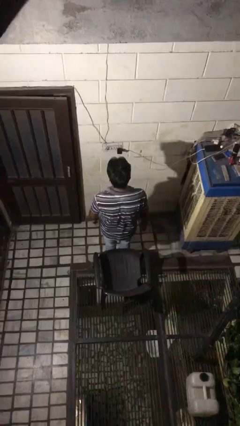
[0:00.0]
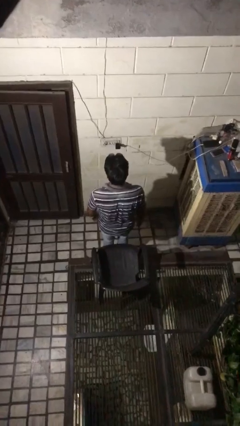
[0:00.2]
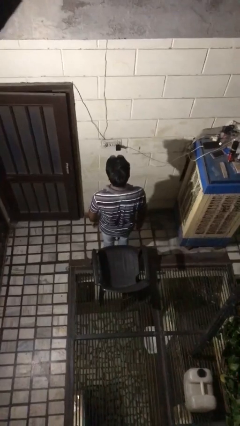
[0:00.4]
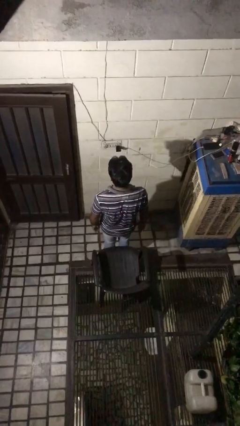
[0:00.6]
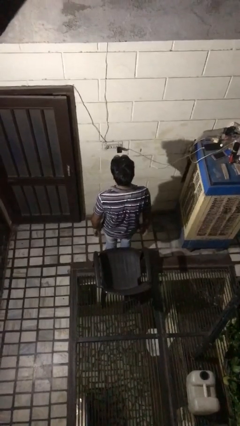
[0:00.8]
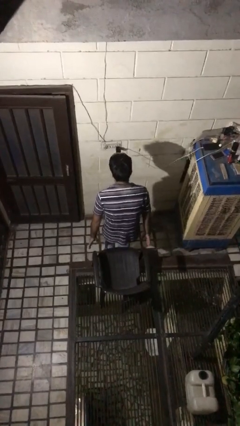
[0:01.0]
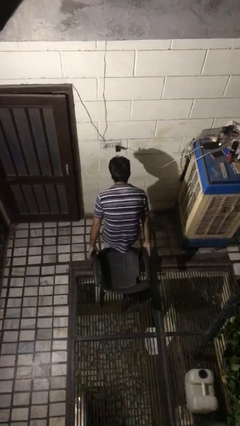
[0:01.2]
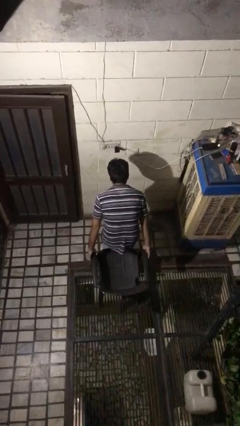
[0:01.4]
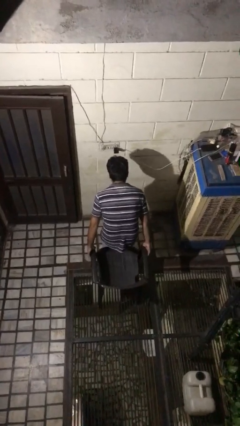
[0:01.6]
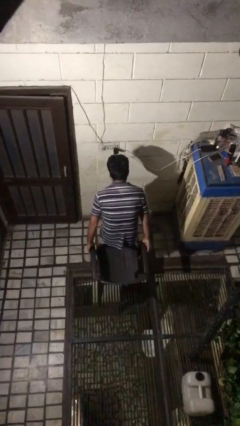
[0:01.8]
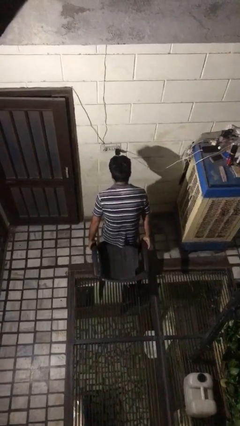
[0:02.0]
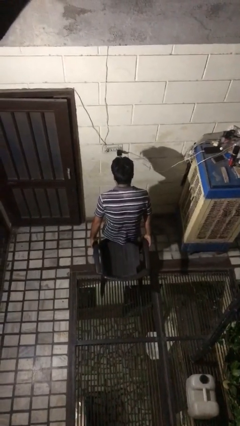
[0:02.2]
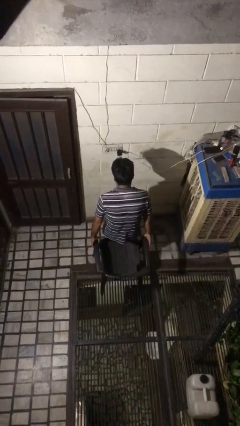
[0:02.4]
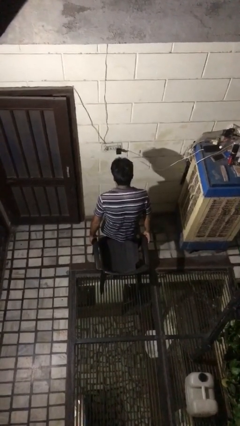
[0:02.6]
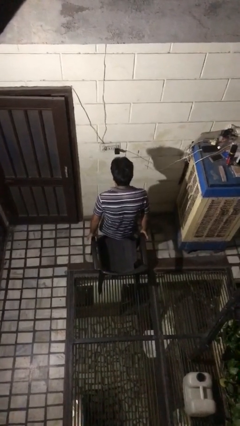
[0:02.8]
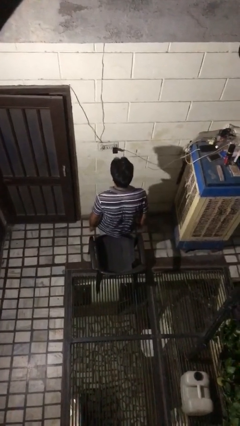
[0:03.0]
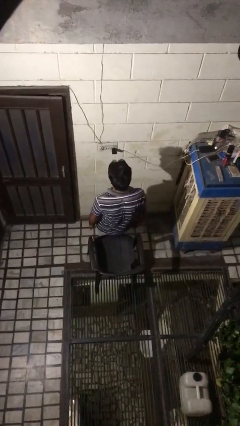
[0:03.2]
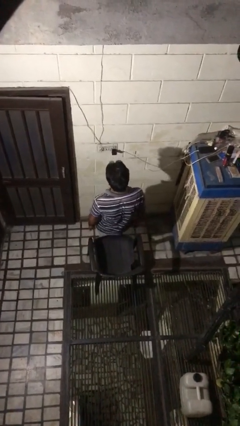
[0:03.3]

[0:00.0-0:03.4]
person pulls out chair

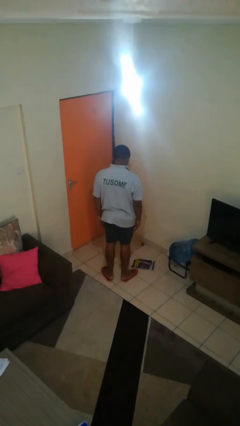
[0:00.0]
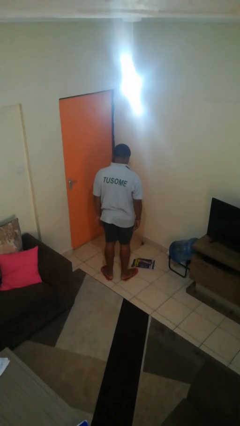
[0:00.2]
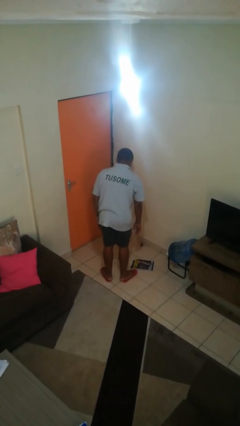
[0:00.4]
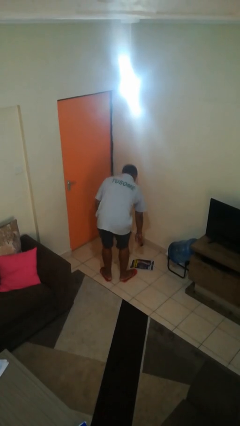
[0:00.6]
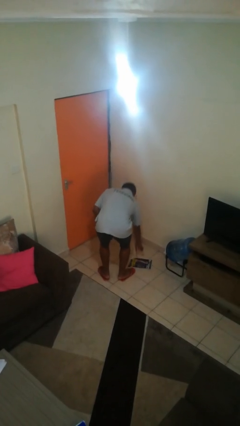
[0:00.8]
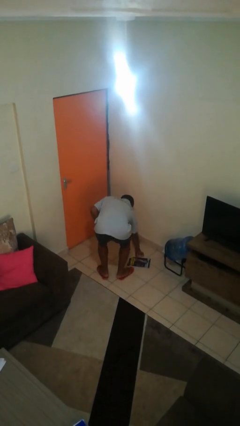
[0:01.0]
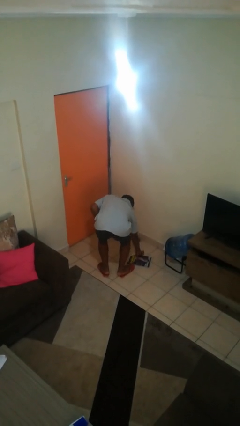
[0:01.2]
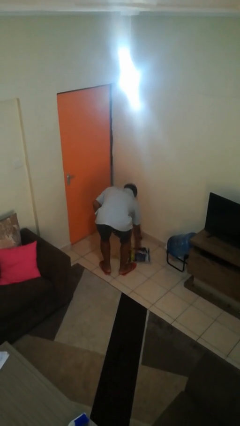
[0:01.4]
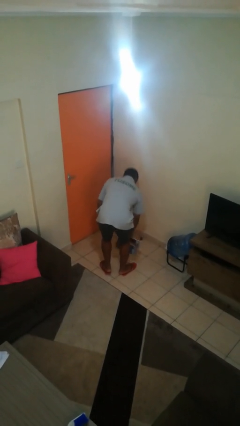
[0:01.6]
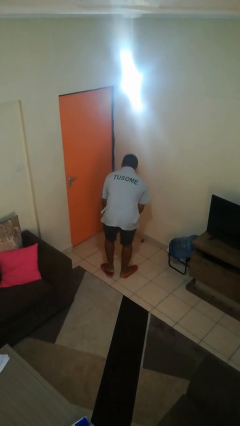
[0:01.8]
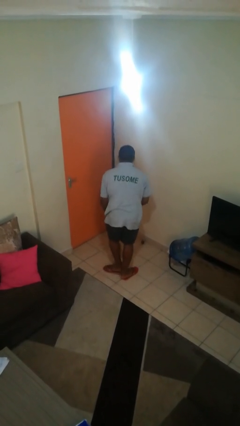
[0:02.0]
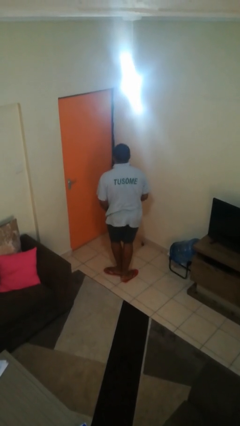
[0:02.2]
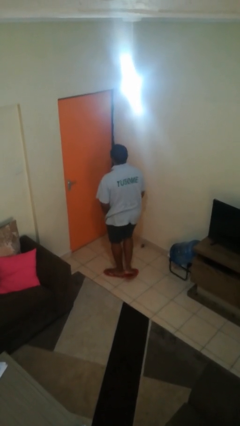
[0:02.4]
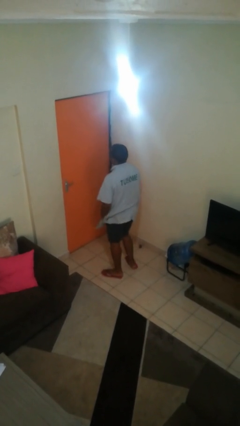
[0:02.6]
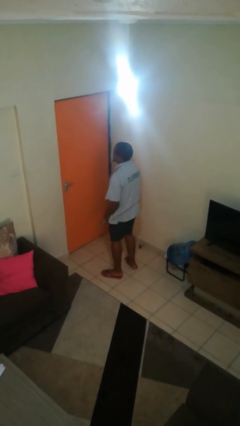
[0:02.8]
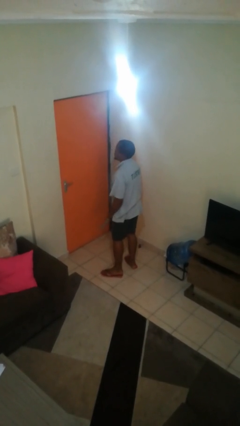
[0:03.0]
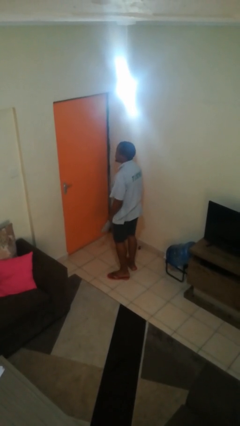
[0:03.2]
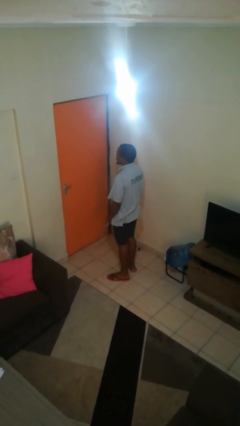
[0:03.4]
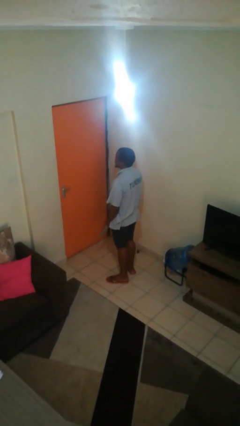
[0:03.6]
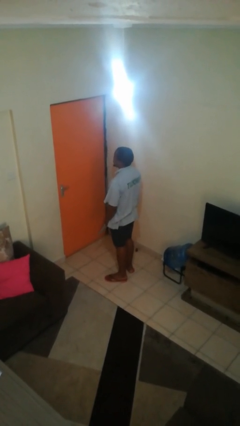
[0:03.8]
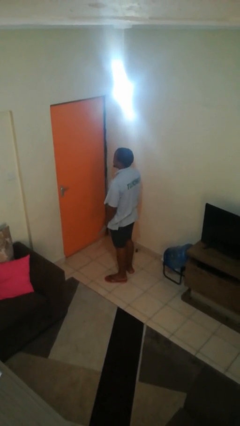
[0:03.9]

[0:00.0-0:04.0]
person picks up object from floor

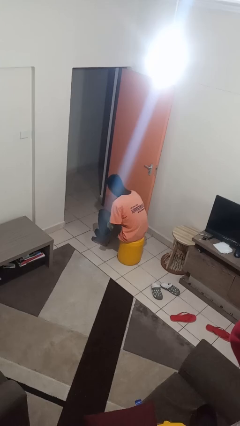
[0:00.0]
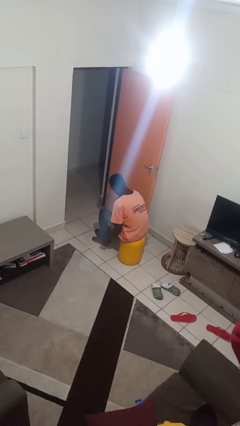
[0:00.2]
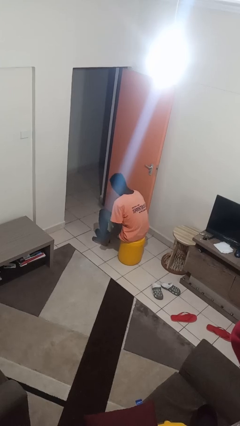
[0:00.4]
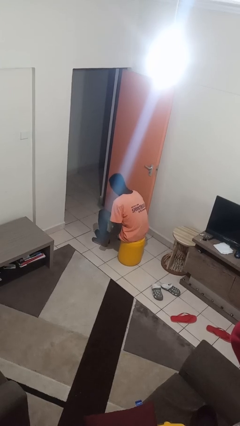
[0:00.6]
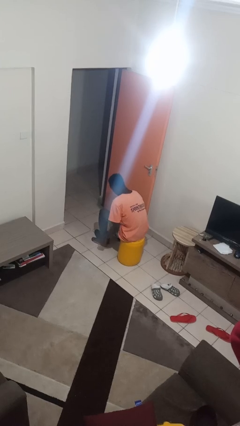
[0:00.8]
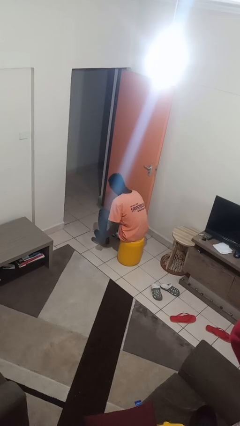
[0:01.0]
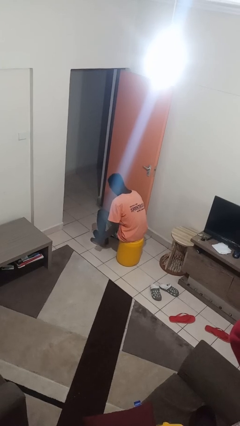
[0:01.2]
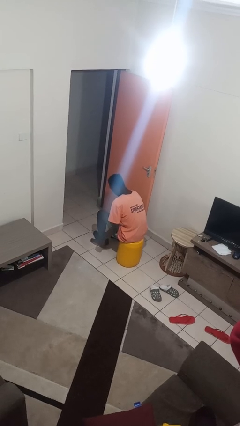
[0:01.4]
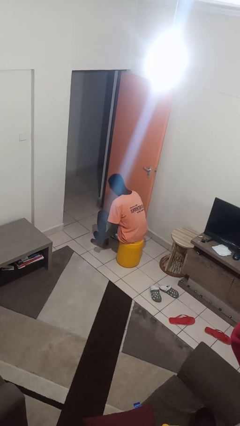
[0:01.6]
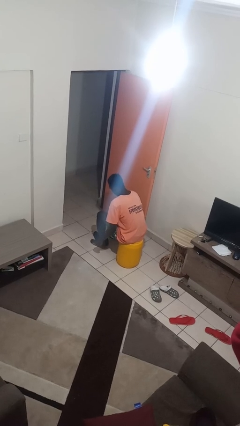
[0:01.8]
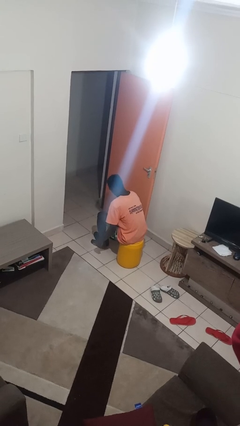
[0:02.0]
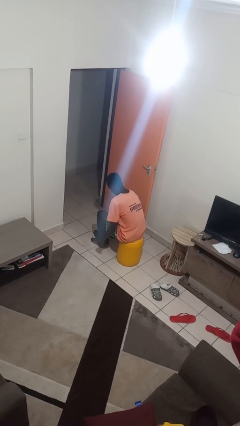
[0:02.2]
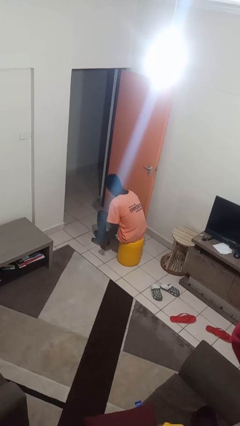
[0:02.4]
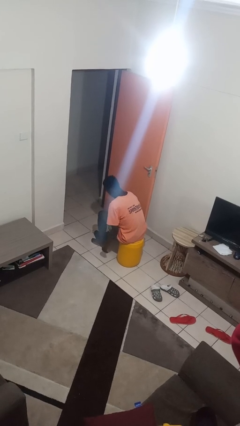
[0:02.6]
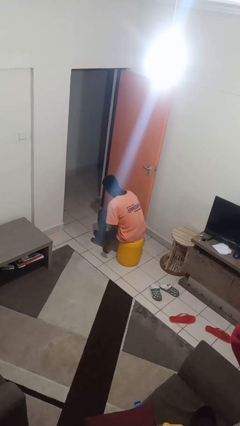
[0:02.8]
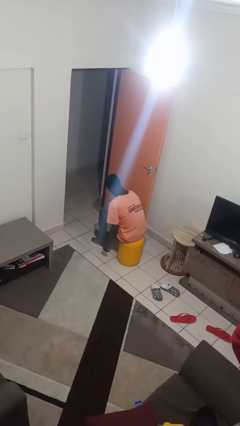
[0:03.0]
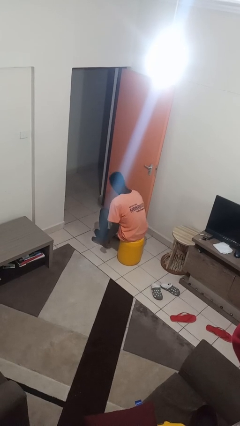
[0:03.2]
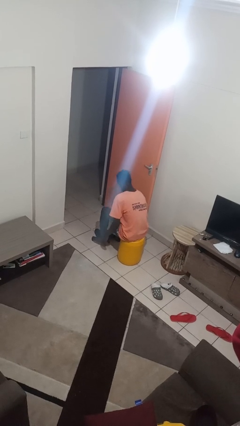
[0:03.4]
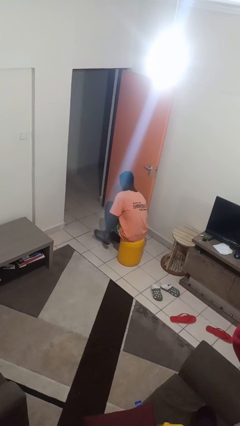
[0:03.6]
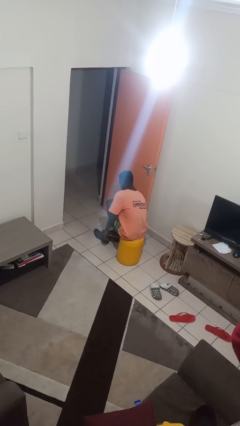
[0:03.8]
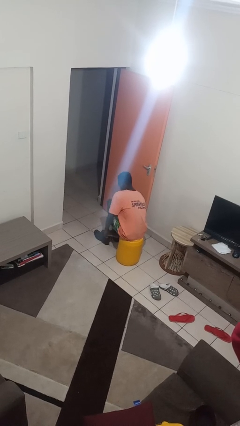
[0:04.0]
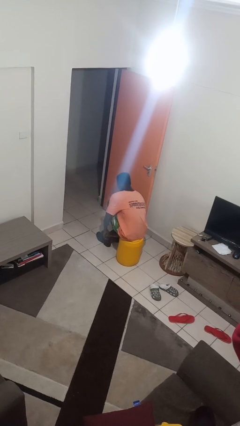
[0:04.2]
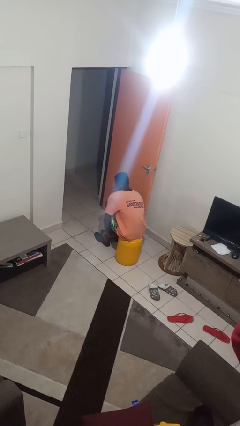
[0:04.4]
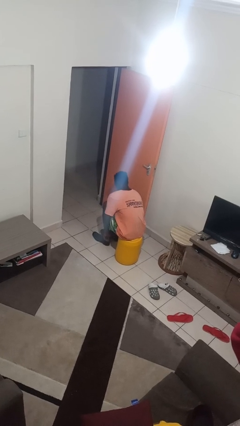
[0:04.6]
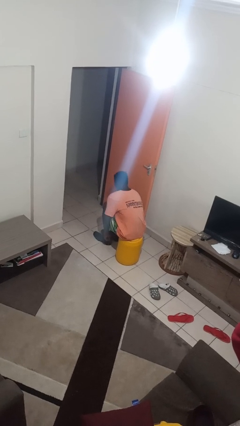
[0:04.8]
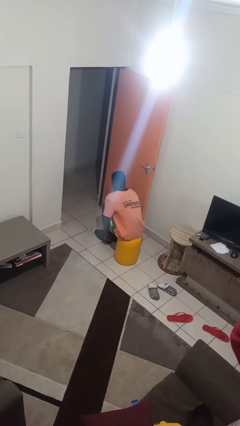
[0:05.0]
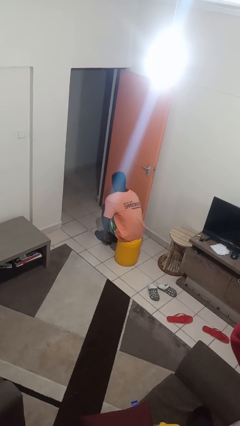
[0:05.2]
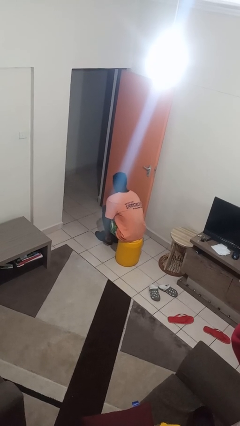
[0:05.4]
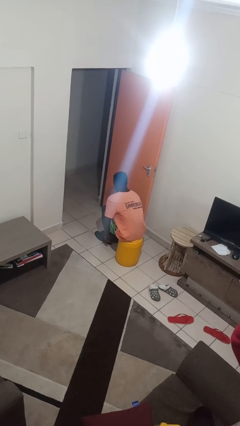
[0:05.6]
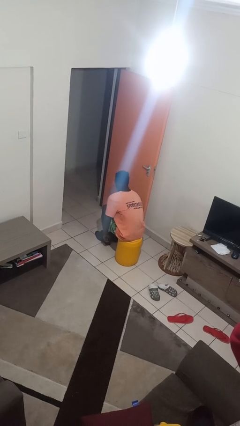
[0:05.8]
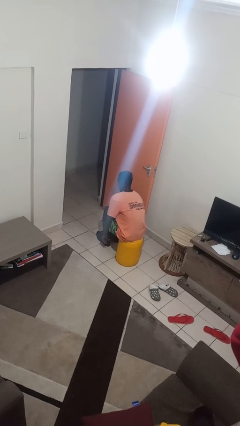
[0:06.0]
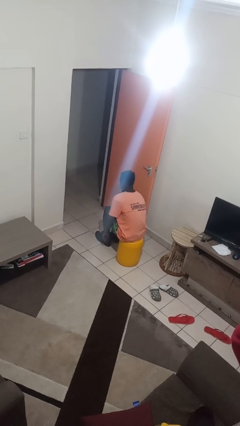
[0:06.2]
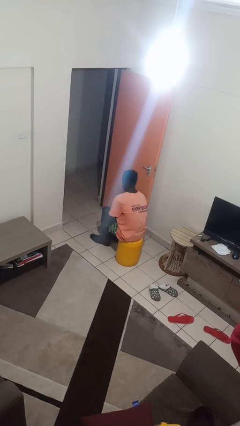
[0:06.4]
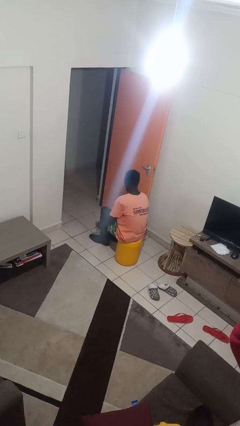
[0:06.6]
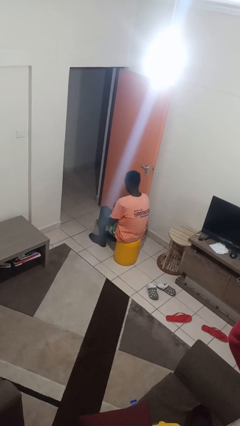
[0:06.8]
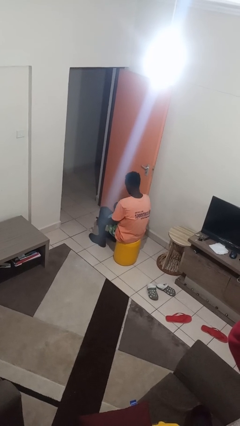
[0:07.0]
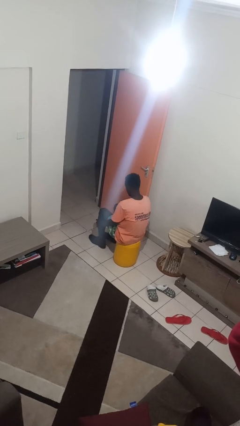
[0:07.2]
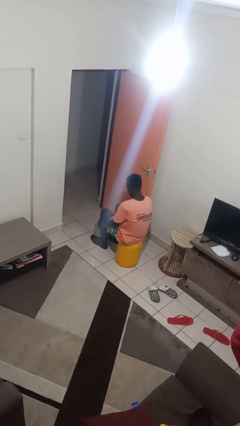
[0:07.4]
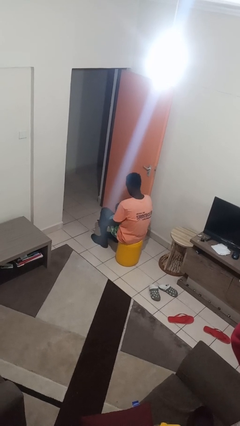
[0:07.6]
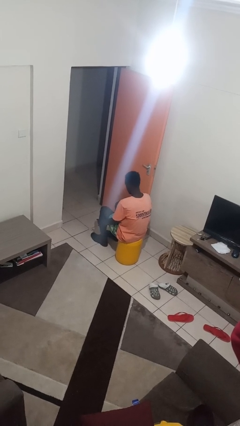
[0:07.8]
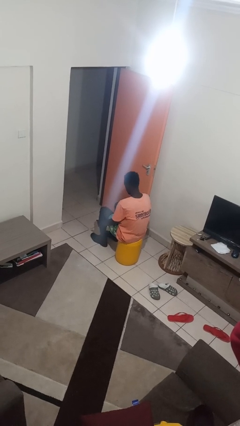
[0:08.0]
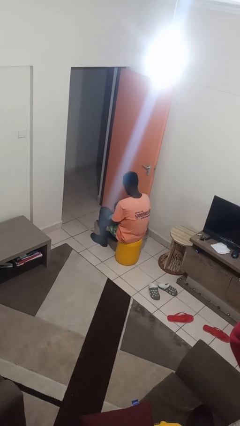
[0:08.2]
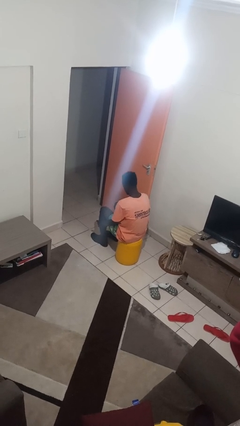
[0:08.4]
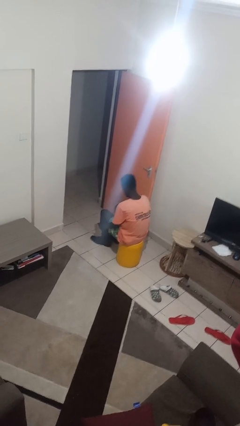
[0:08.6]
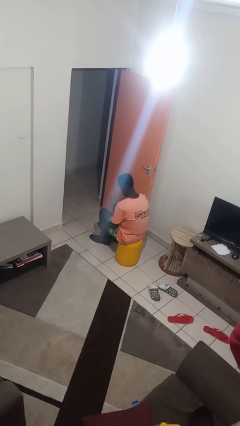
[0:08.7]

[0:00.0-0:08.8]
person puts on shoes

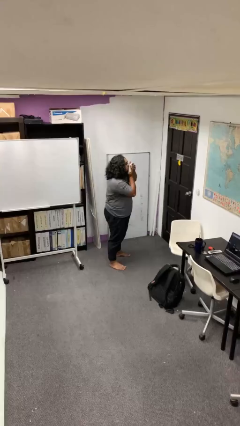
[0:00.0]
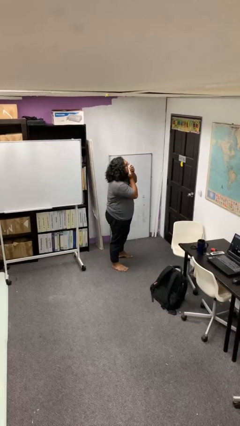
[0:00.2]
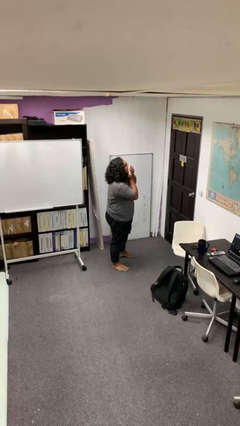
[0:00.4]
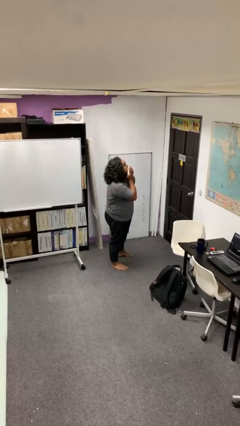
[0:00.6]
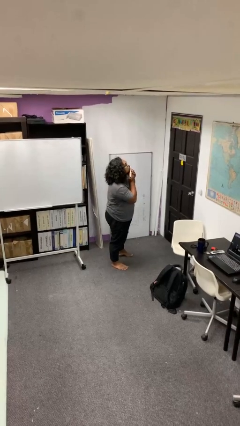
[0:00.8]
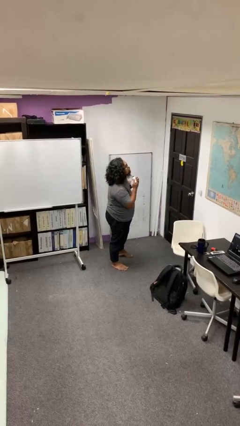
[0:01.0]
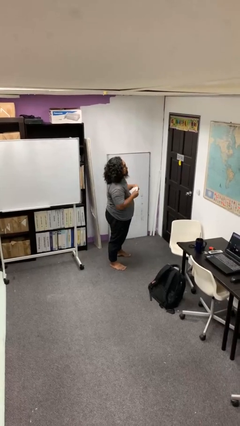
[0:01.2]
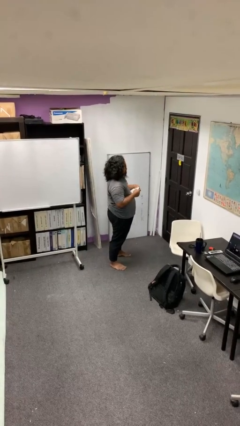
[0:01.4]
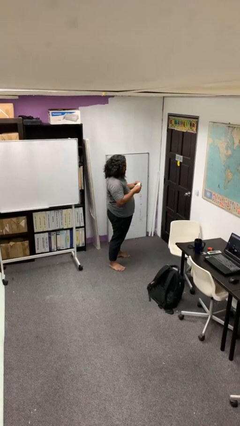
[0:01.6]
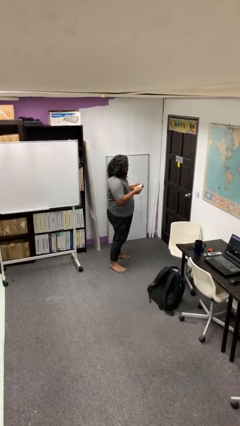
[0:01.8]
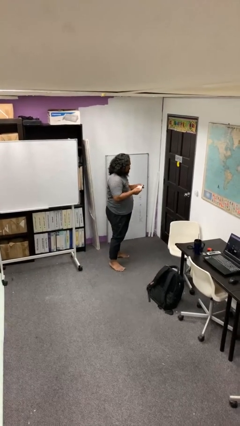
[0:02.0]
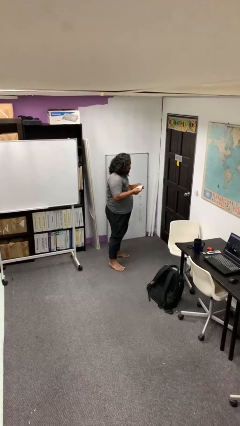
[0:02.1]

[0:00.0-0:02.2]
person wipes mouth with napkin
